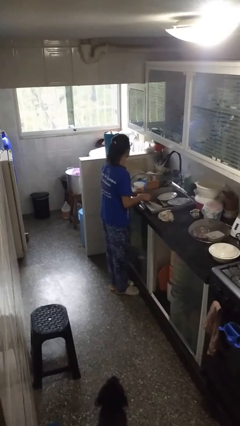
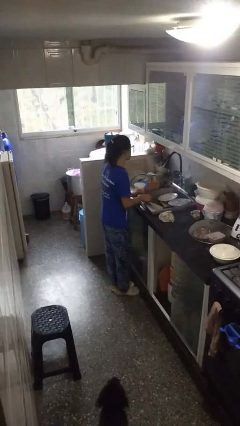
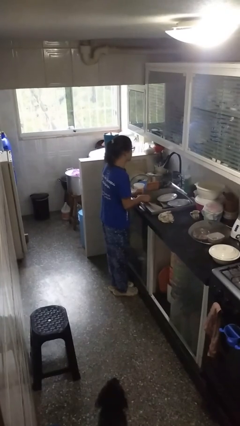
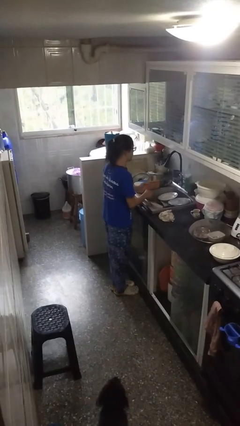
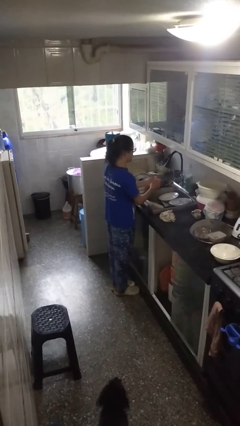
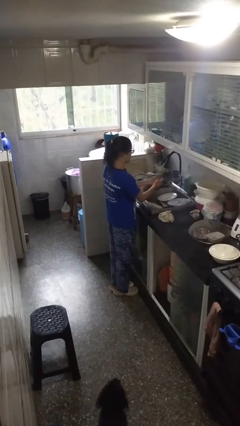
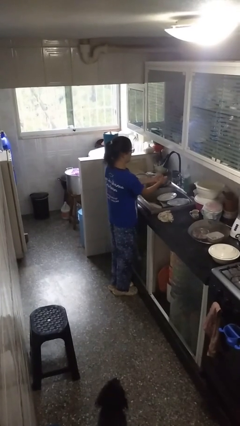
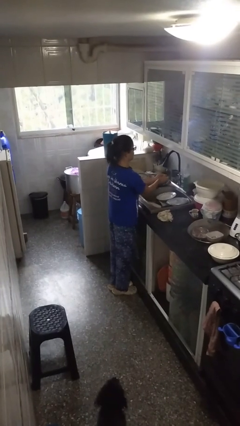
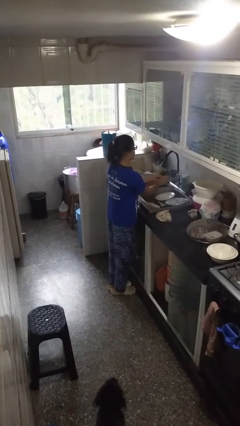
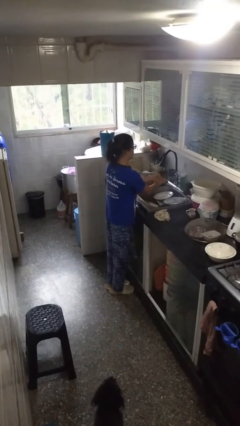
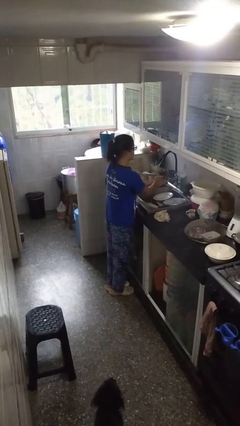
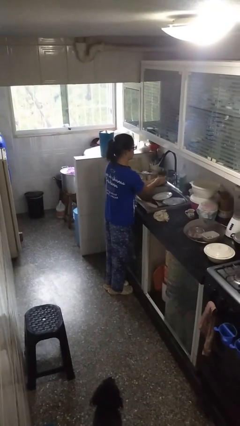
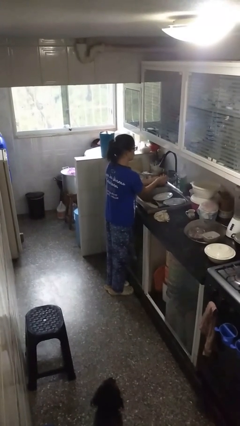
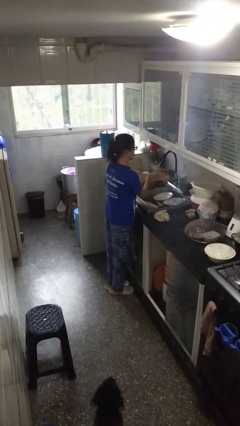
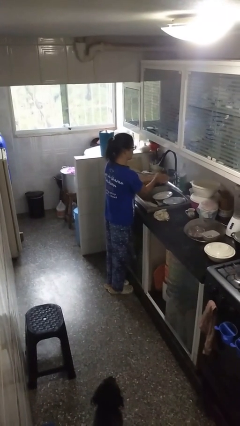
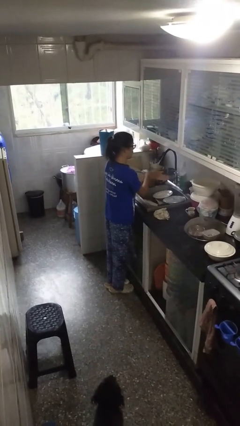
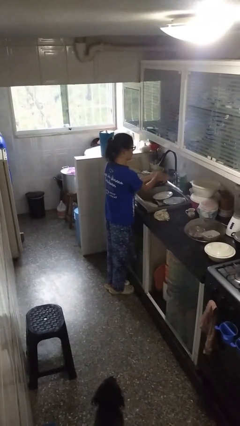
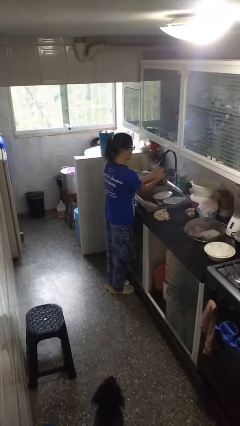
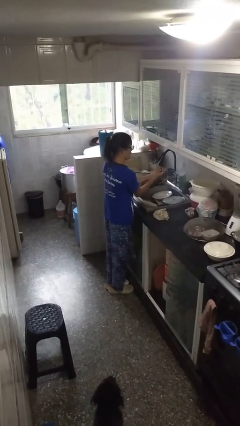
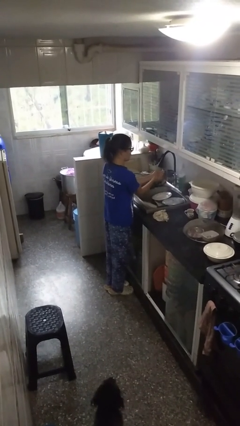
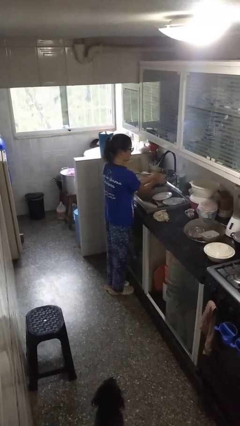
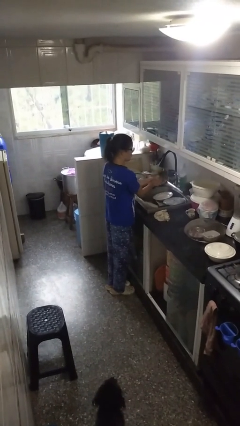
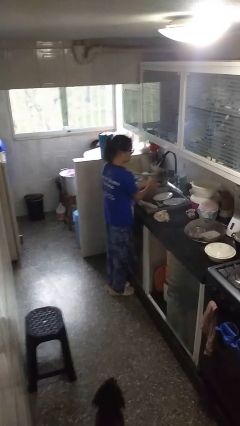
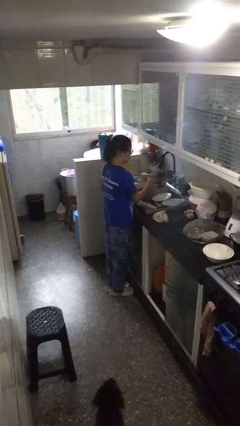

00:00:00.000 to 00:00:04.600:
person washes hands

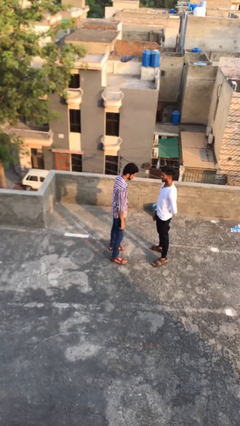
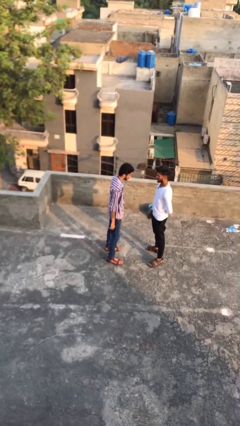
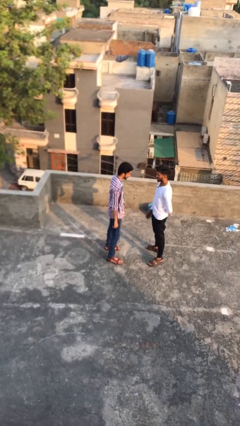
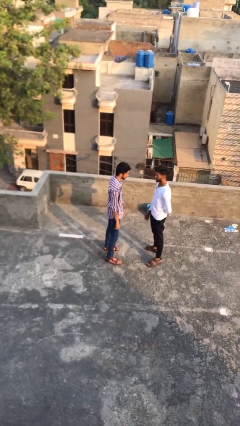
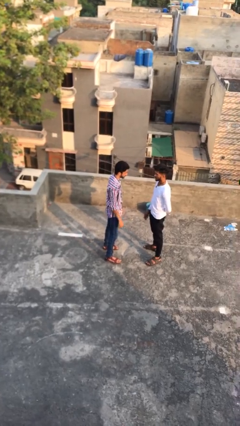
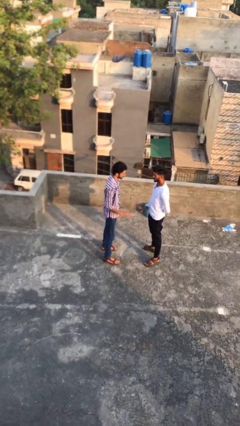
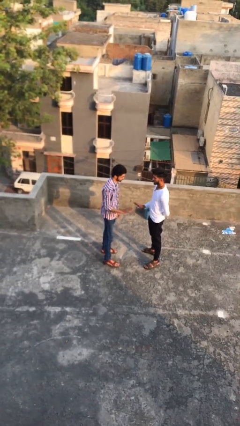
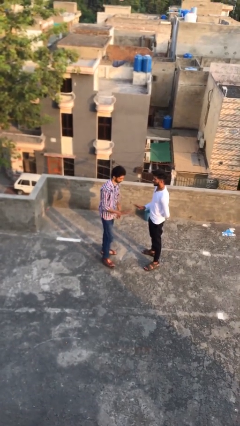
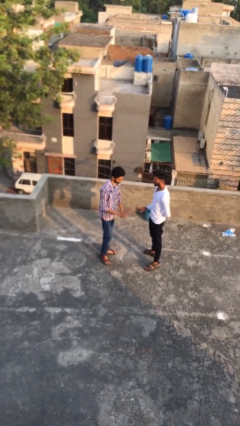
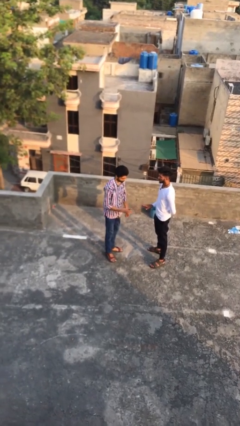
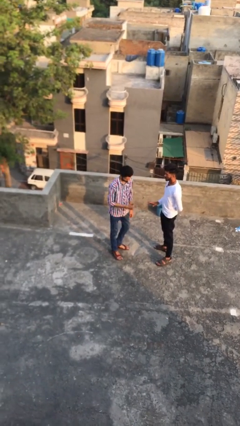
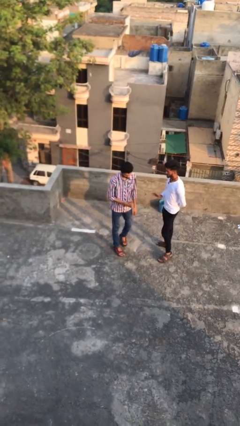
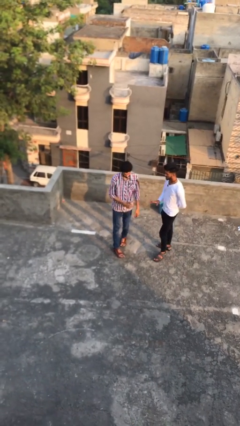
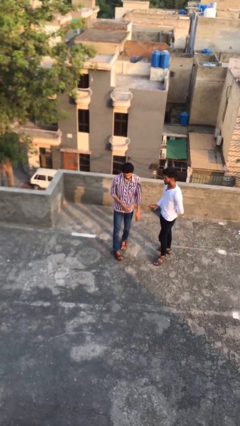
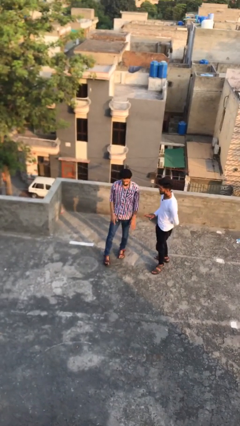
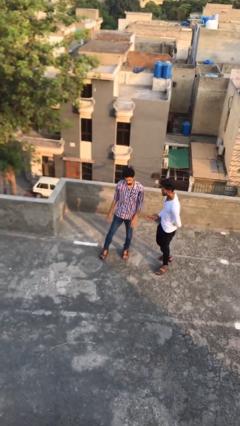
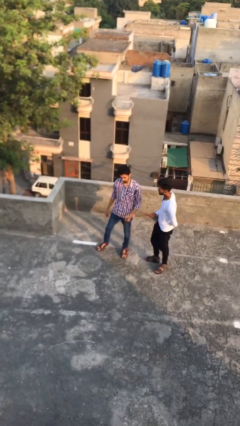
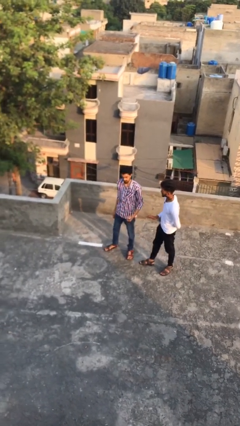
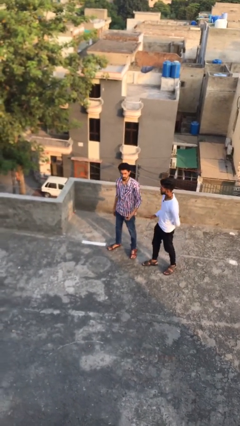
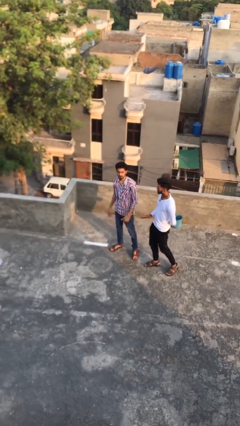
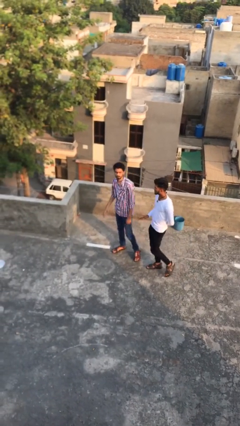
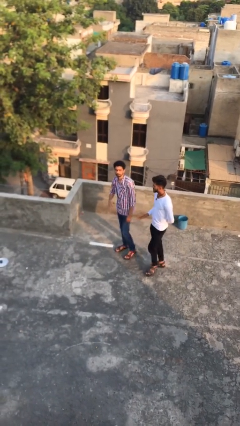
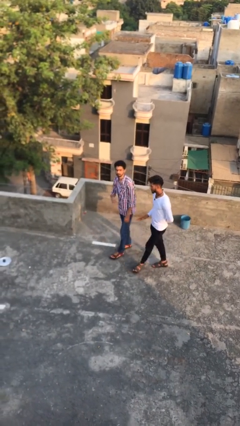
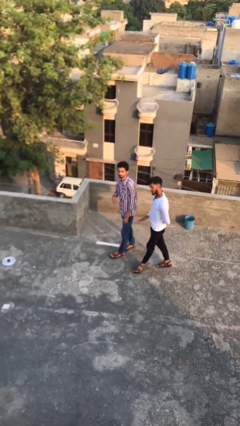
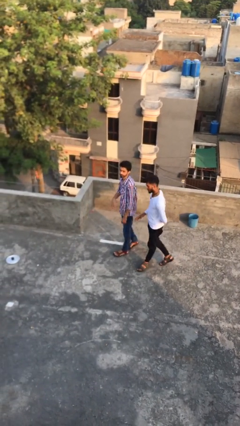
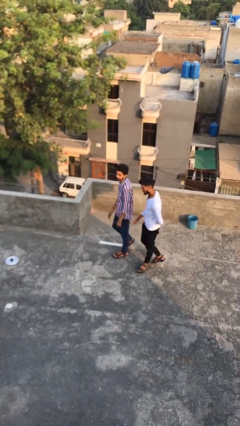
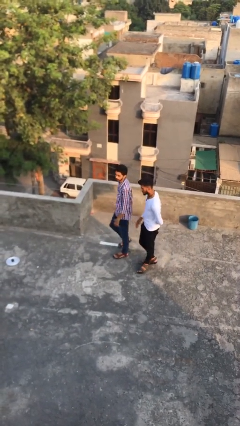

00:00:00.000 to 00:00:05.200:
person talks to person

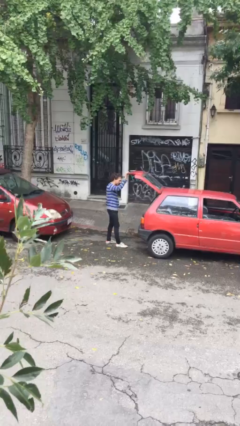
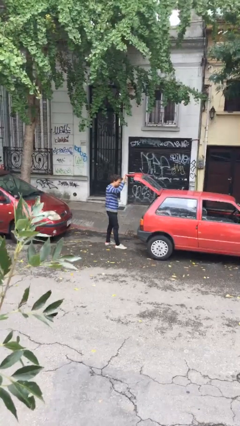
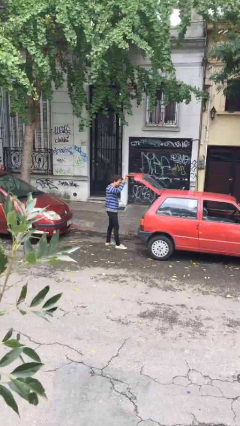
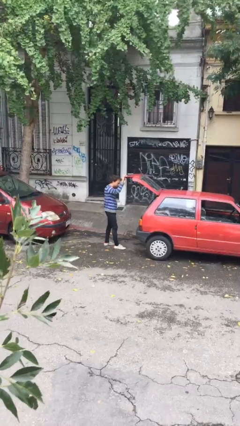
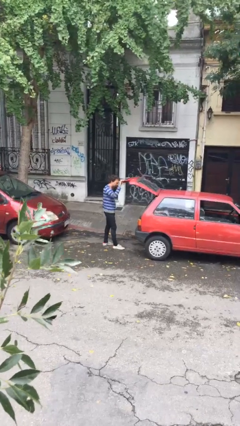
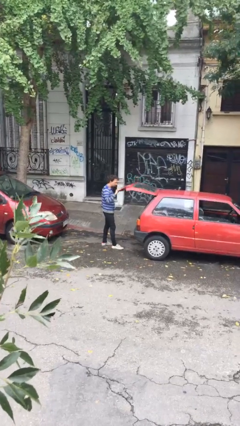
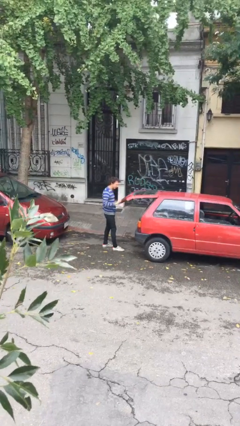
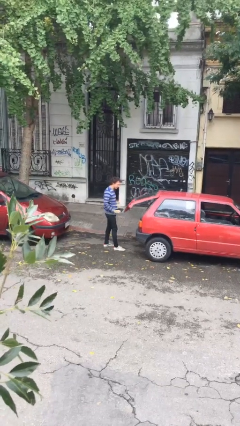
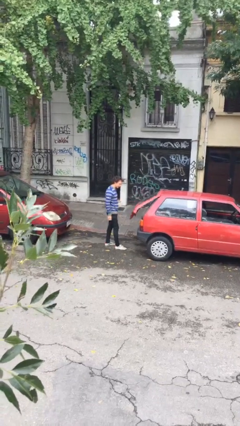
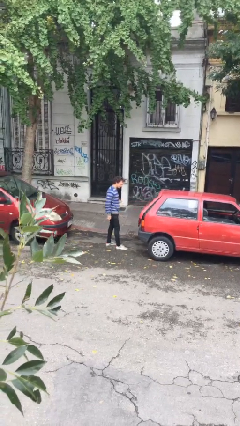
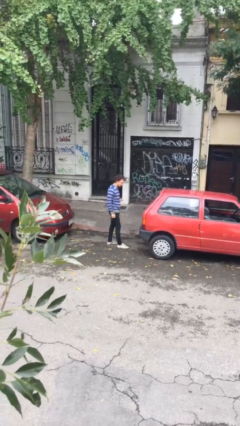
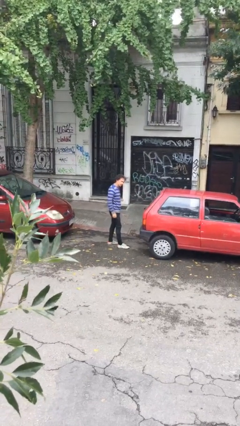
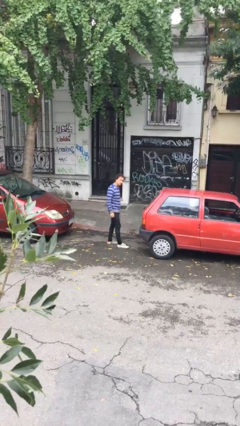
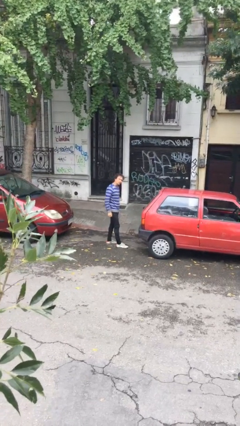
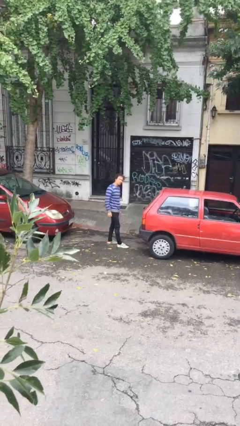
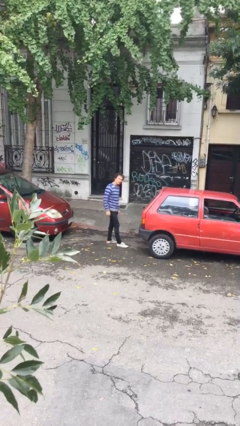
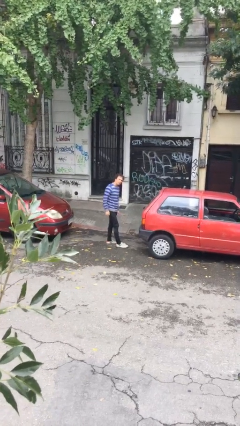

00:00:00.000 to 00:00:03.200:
person closes car trunk

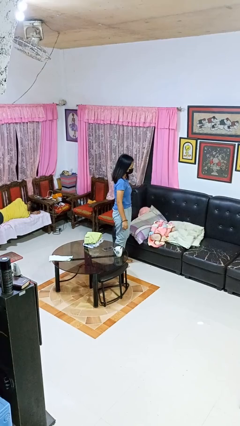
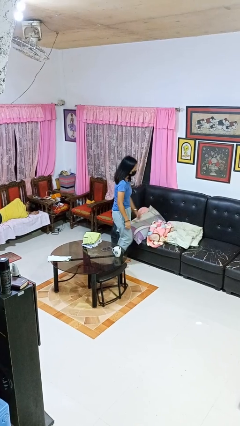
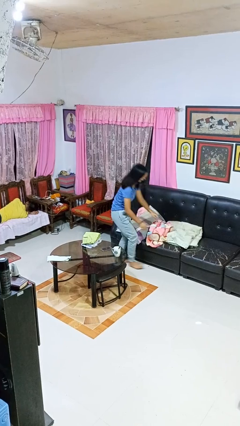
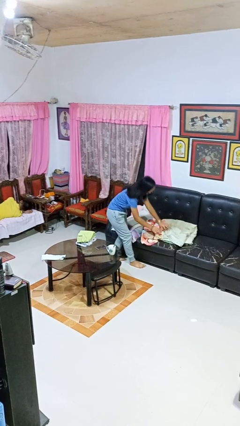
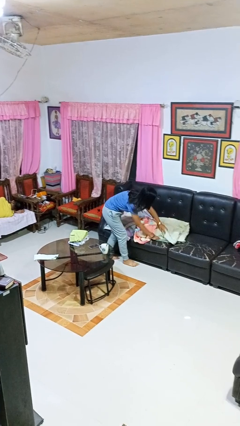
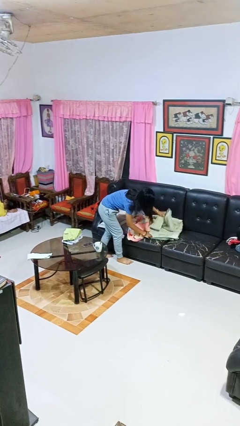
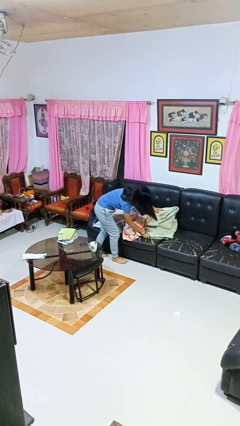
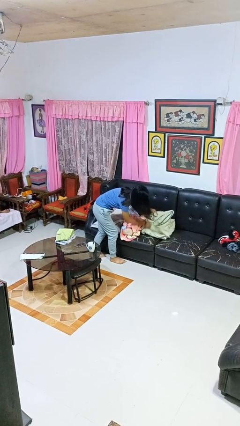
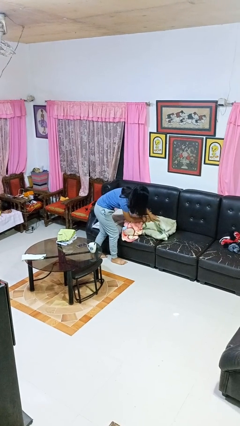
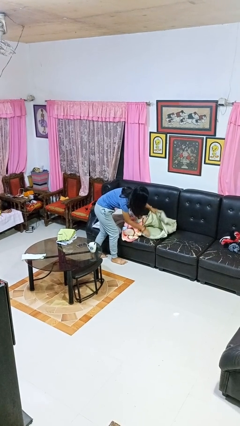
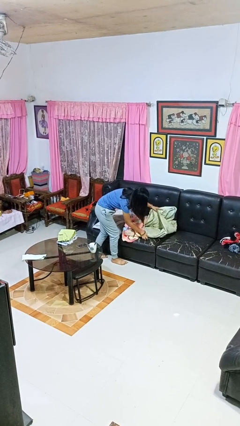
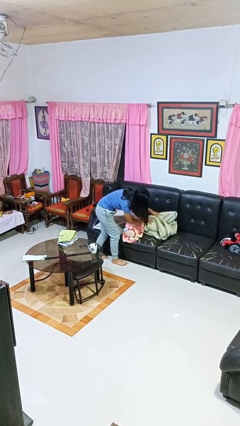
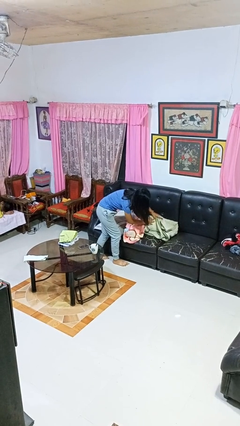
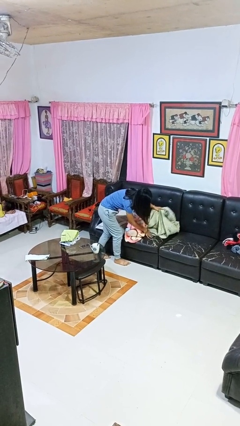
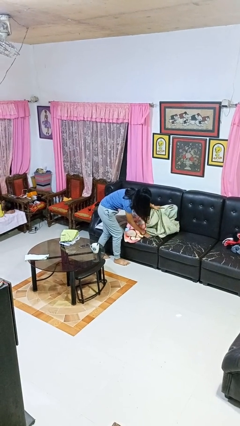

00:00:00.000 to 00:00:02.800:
person searches in couch

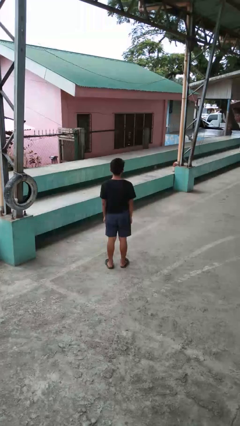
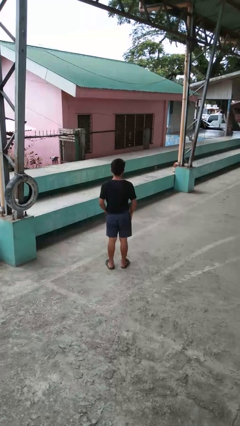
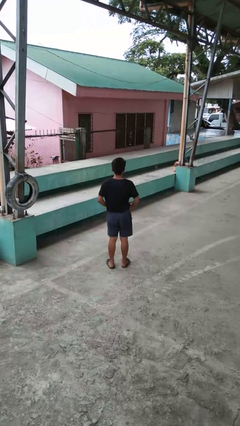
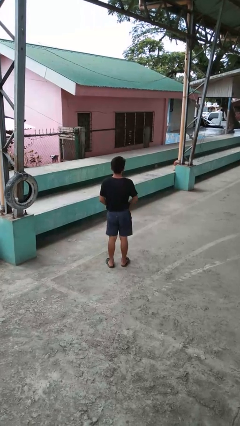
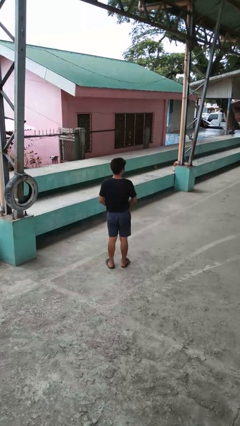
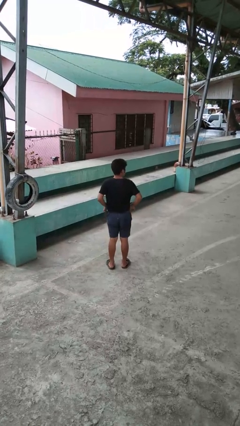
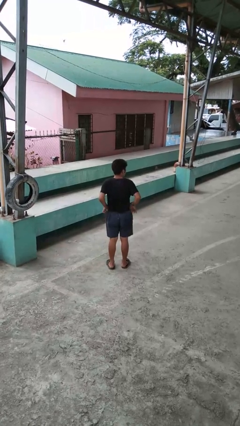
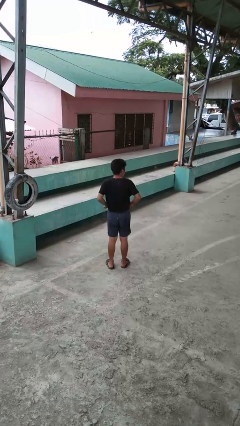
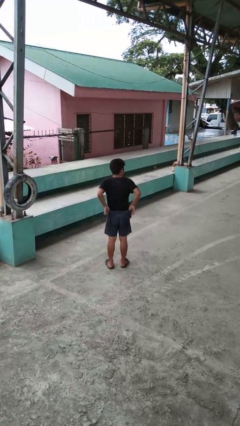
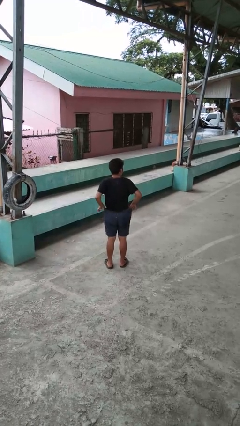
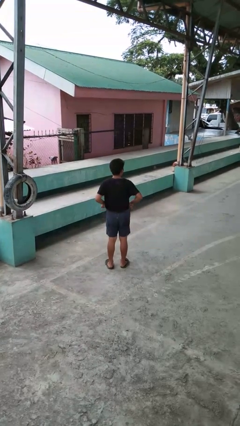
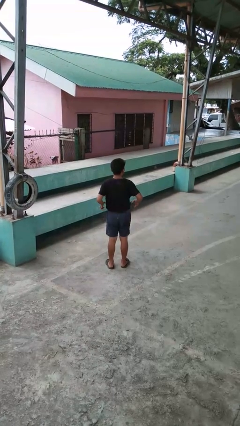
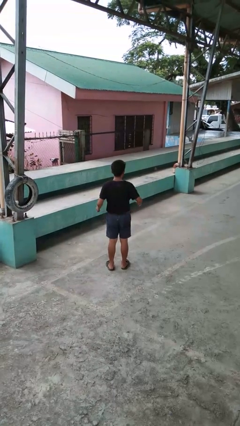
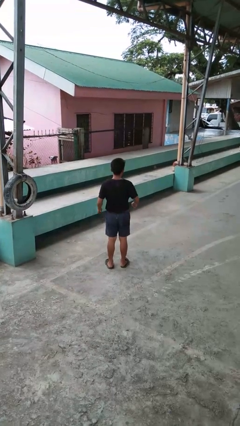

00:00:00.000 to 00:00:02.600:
person hikes up pants
